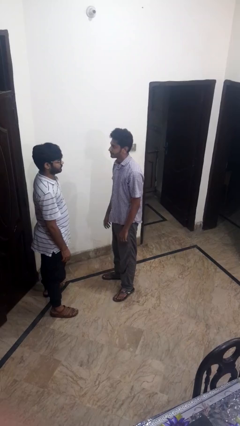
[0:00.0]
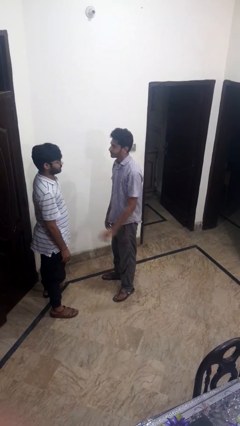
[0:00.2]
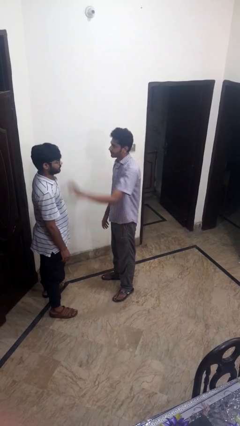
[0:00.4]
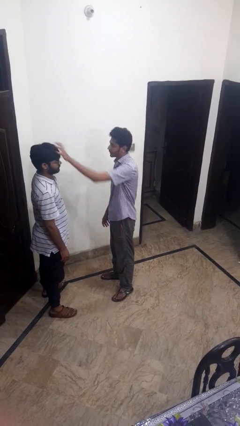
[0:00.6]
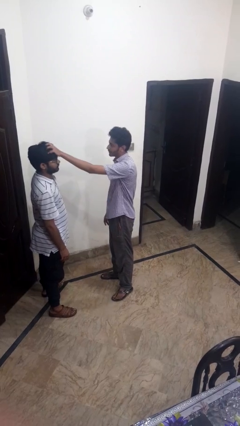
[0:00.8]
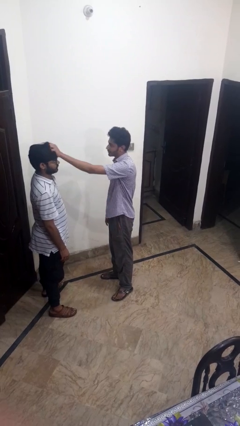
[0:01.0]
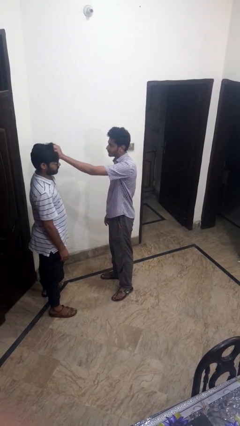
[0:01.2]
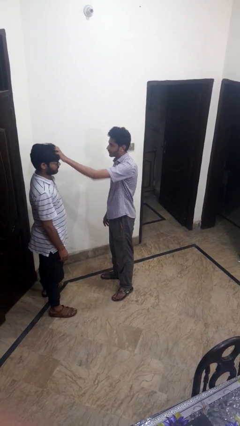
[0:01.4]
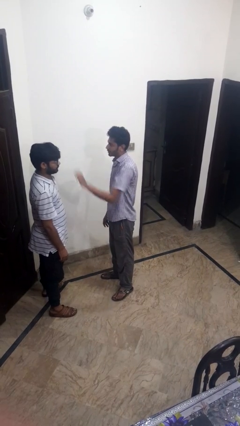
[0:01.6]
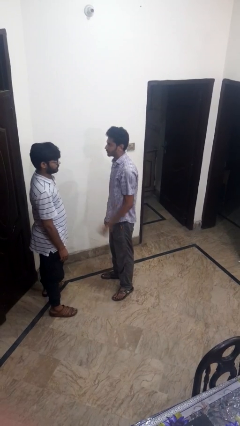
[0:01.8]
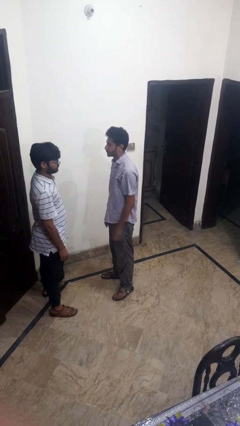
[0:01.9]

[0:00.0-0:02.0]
person grabs person by hair

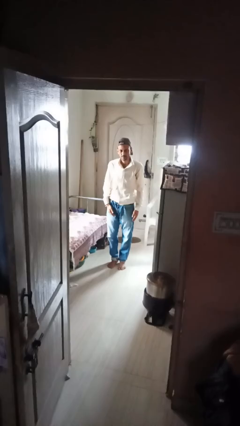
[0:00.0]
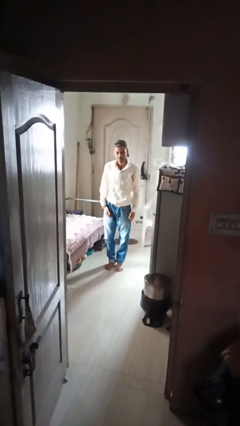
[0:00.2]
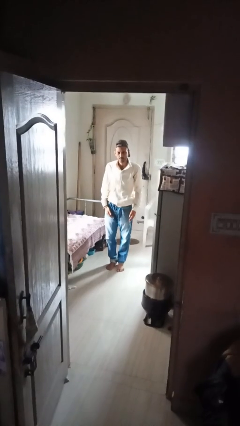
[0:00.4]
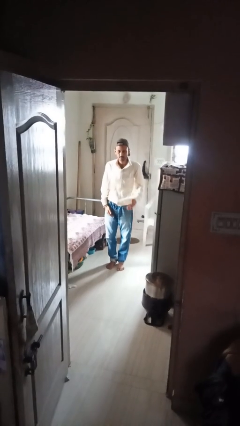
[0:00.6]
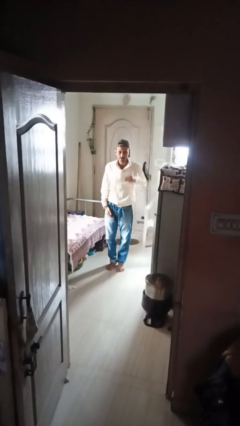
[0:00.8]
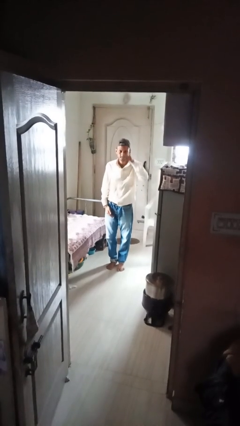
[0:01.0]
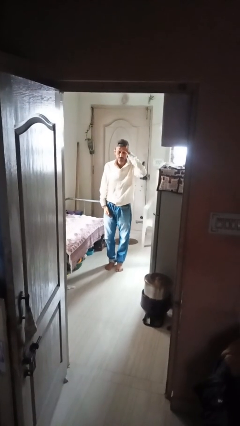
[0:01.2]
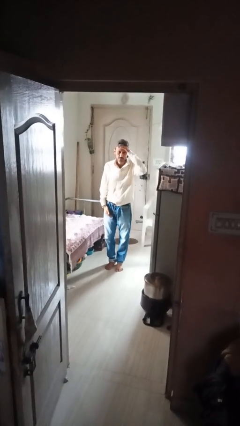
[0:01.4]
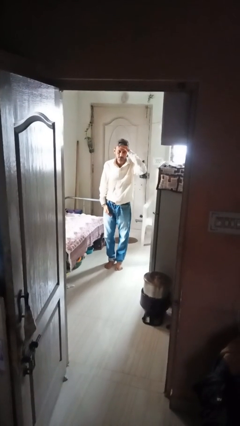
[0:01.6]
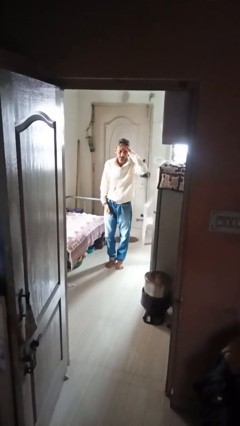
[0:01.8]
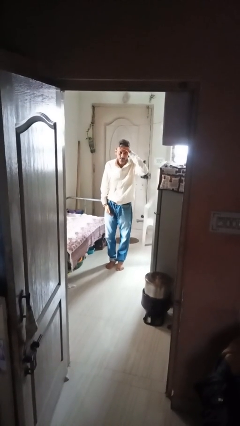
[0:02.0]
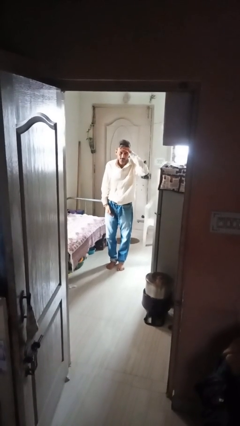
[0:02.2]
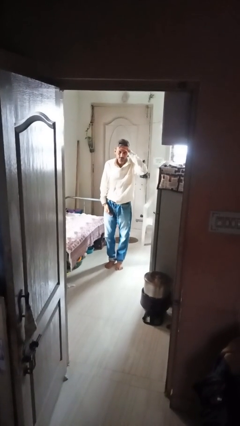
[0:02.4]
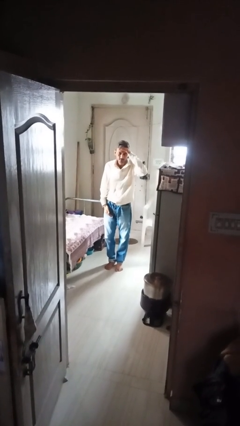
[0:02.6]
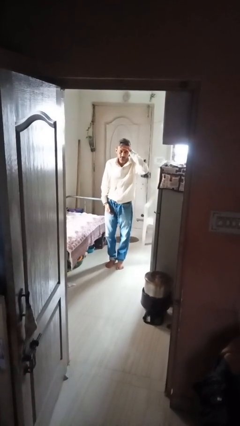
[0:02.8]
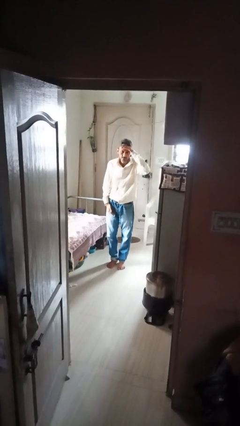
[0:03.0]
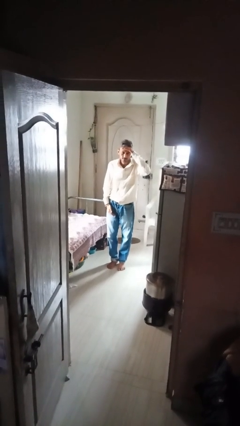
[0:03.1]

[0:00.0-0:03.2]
person shades eyes

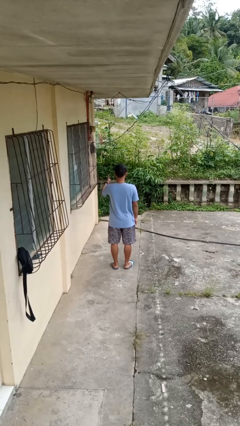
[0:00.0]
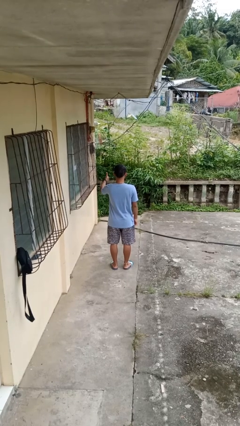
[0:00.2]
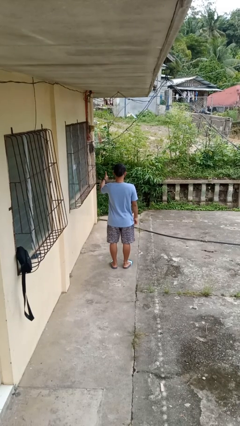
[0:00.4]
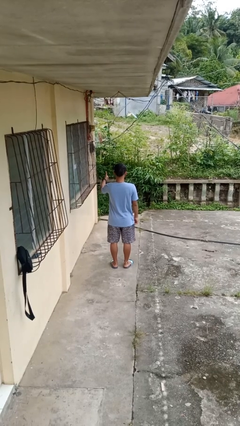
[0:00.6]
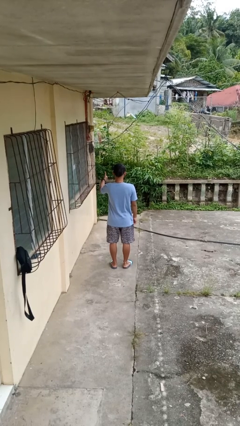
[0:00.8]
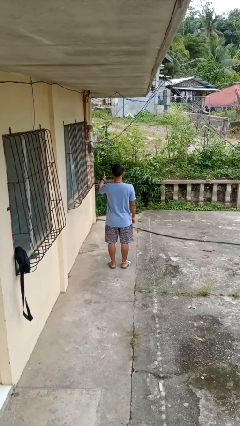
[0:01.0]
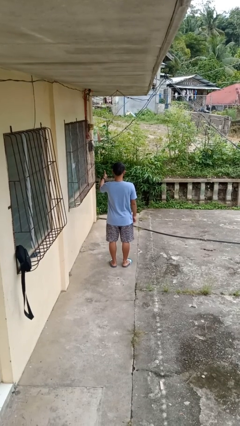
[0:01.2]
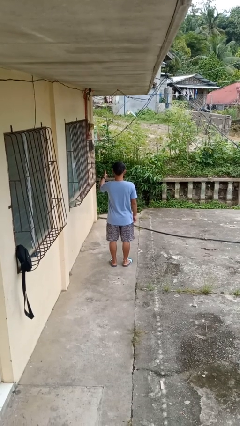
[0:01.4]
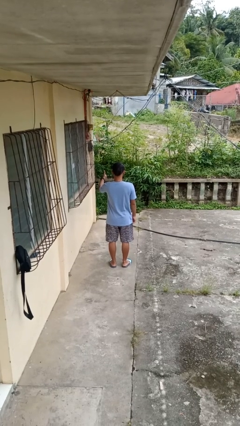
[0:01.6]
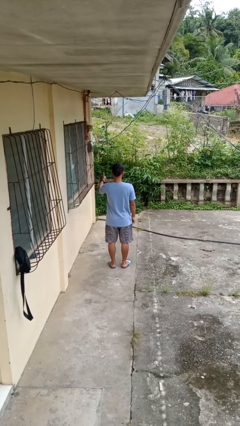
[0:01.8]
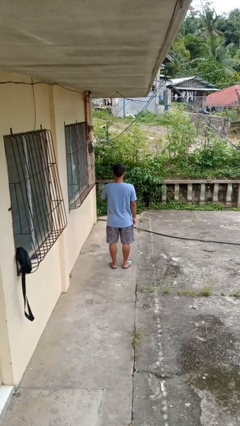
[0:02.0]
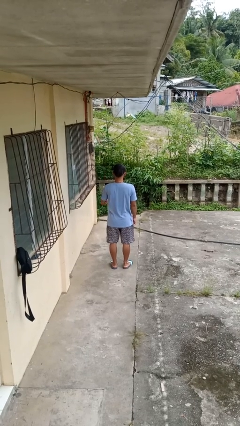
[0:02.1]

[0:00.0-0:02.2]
person gestures thumbs up

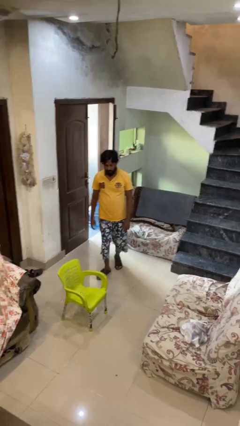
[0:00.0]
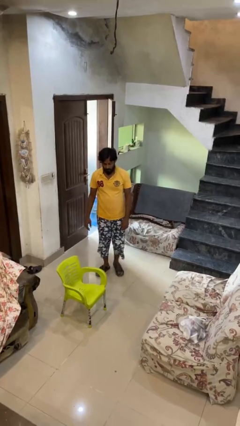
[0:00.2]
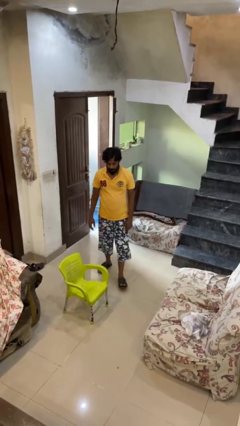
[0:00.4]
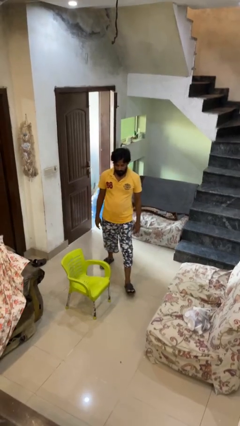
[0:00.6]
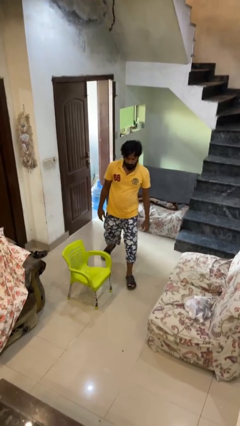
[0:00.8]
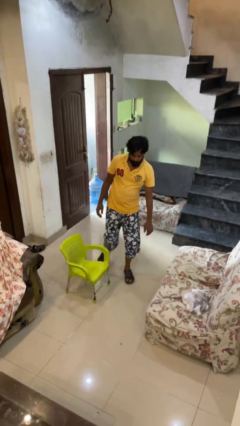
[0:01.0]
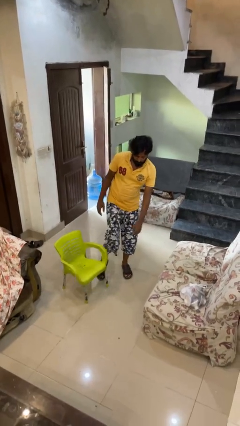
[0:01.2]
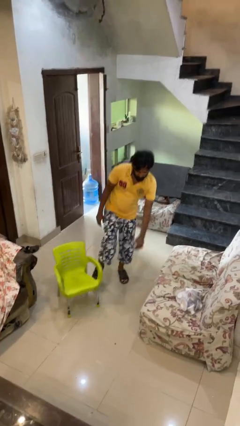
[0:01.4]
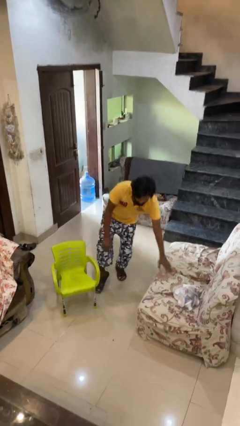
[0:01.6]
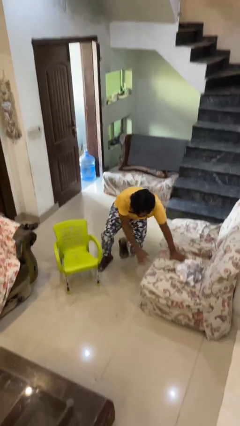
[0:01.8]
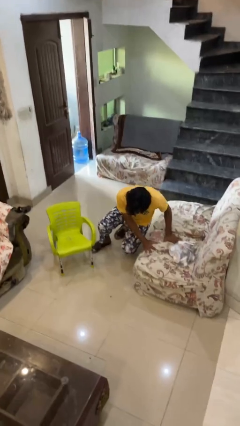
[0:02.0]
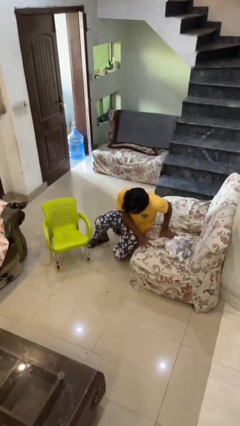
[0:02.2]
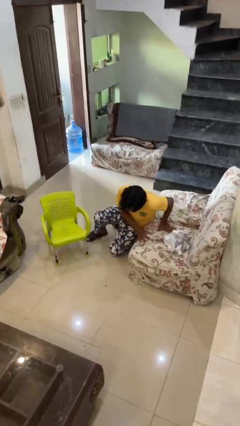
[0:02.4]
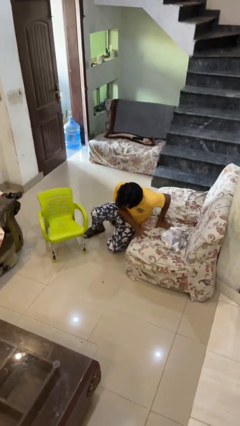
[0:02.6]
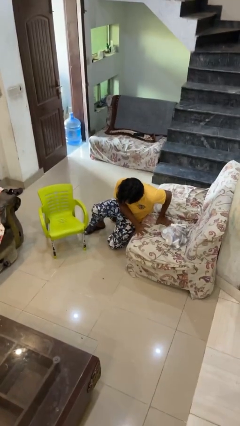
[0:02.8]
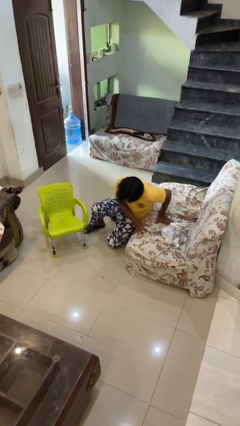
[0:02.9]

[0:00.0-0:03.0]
person trips on object on floor

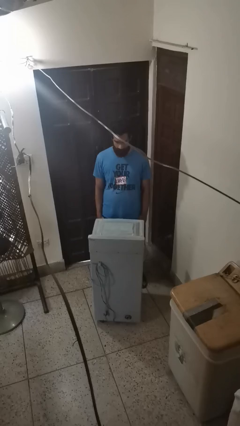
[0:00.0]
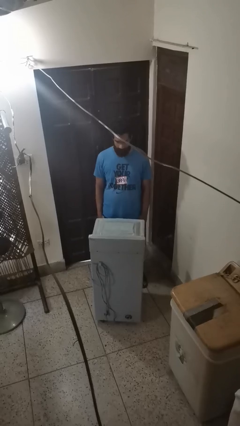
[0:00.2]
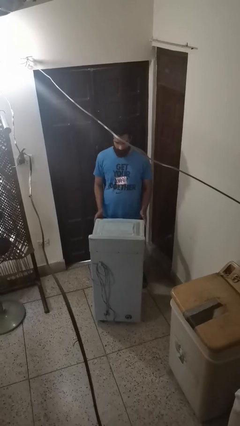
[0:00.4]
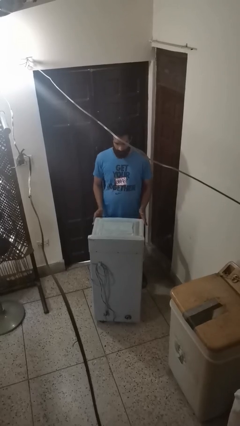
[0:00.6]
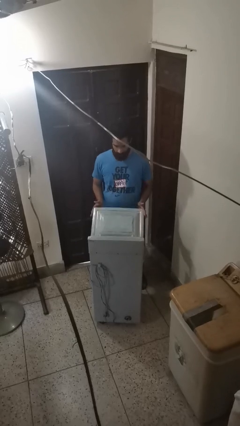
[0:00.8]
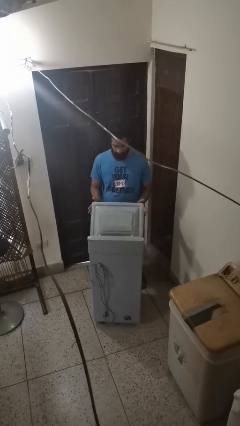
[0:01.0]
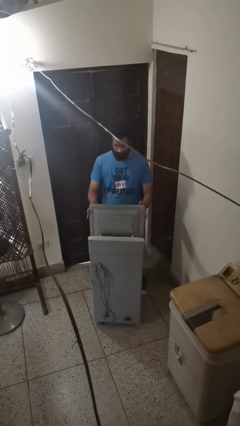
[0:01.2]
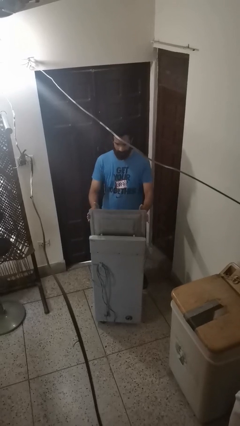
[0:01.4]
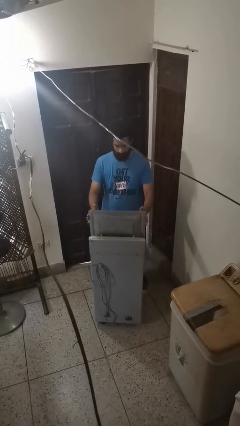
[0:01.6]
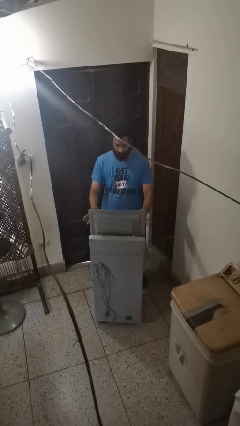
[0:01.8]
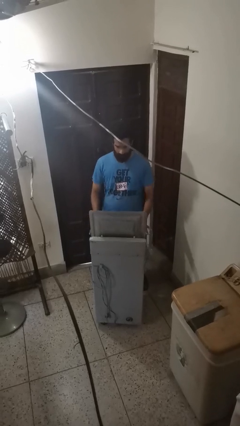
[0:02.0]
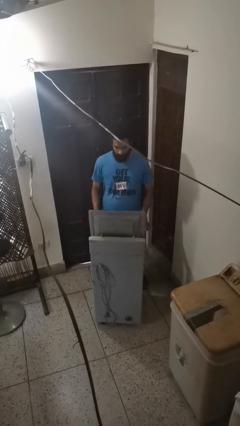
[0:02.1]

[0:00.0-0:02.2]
person opens clothes washer

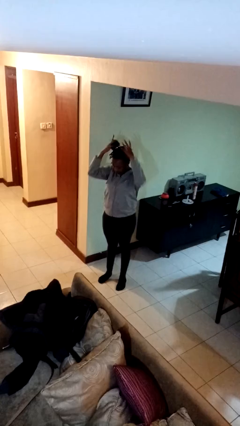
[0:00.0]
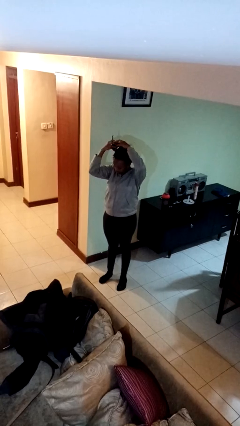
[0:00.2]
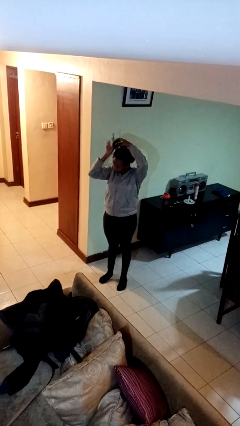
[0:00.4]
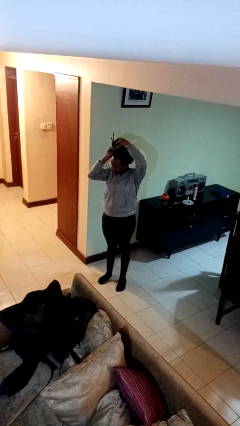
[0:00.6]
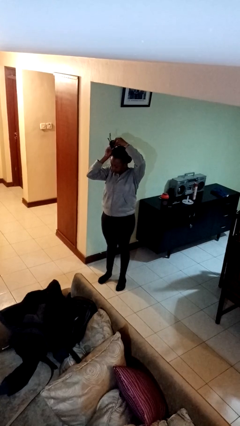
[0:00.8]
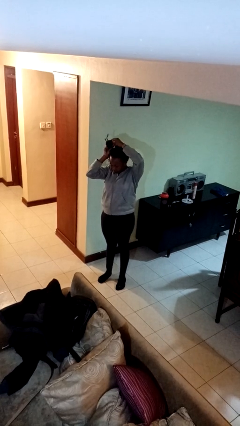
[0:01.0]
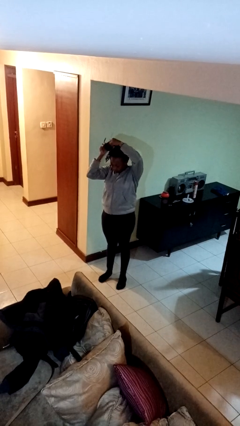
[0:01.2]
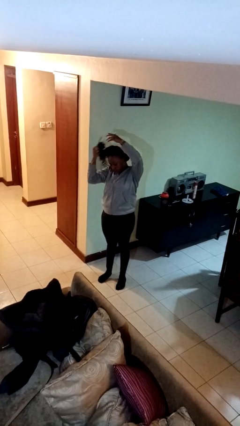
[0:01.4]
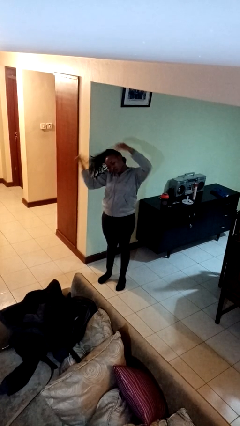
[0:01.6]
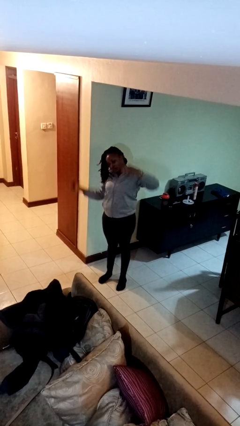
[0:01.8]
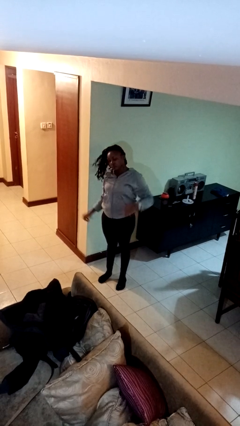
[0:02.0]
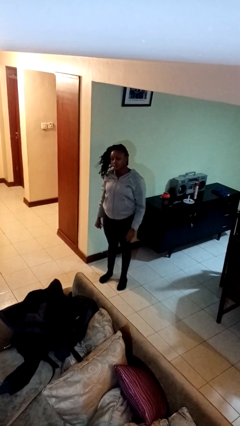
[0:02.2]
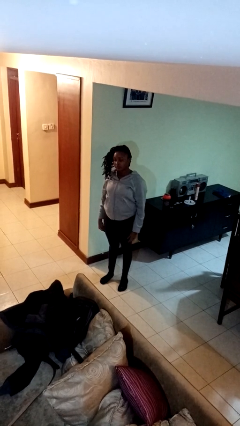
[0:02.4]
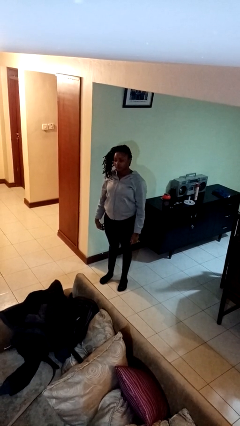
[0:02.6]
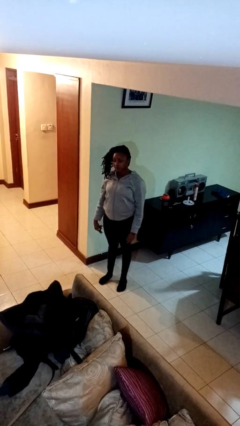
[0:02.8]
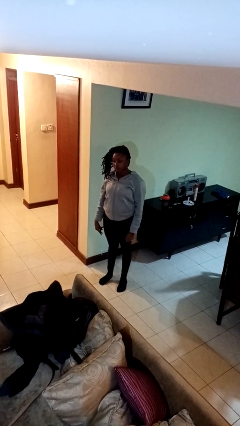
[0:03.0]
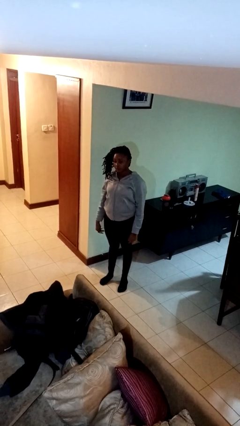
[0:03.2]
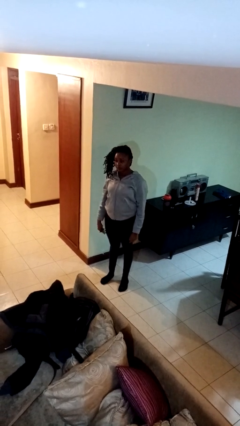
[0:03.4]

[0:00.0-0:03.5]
person takes off hairtie

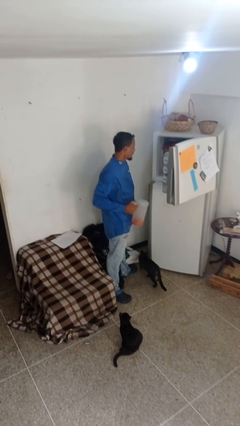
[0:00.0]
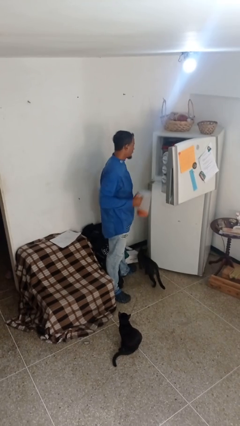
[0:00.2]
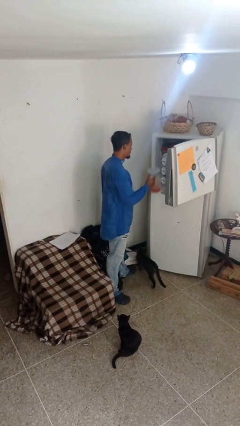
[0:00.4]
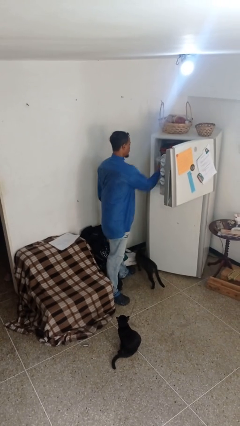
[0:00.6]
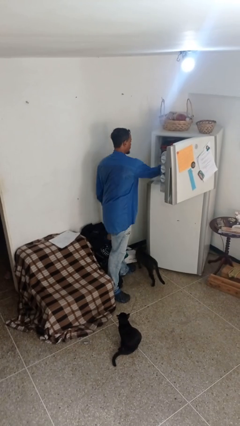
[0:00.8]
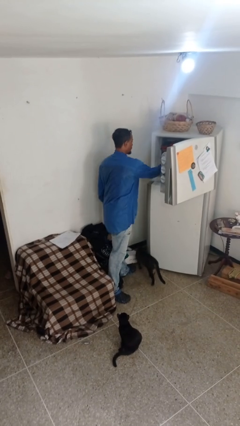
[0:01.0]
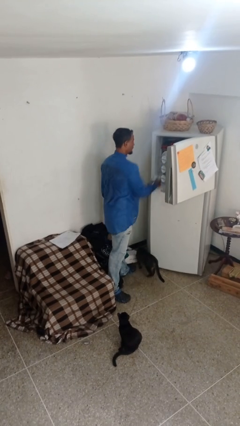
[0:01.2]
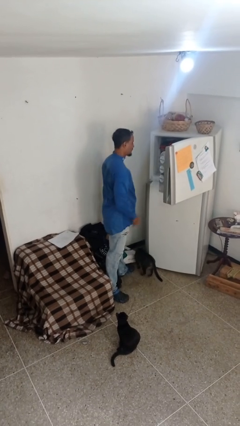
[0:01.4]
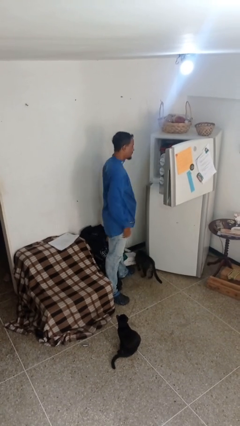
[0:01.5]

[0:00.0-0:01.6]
person puts object into refrigerator
